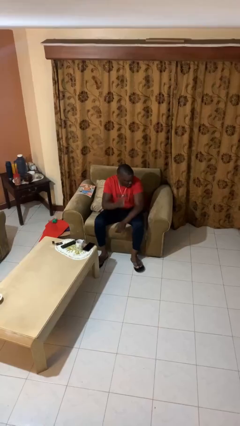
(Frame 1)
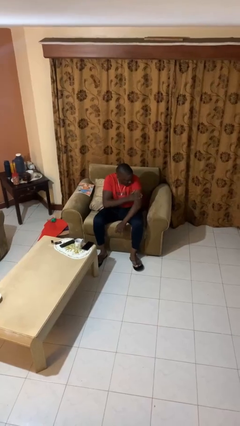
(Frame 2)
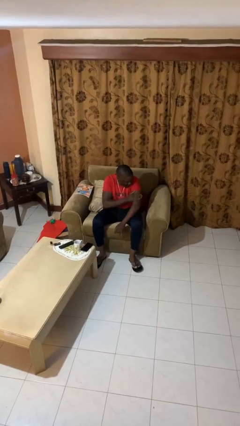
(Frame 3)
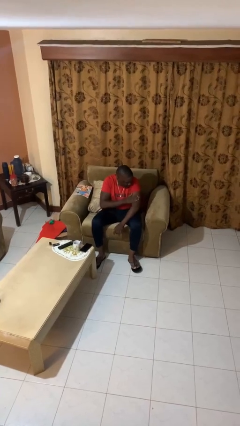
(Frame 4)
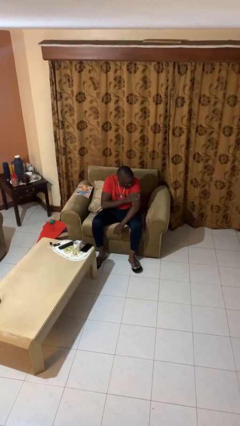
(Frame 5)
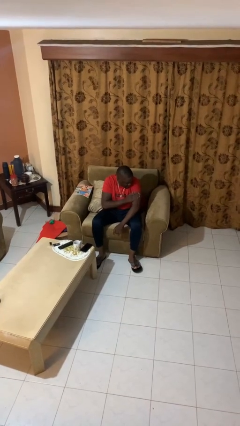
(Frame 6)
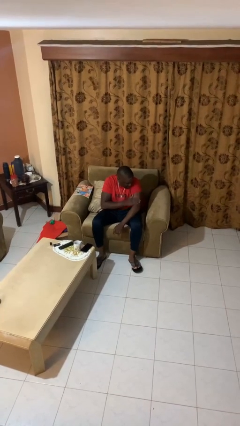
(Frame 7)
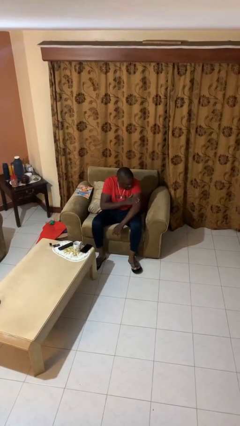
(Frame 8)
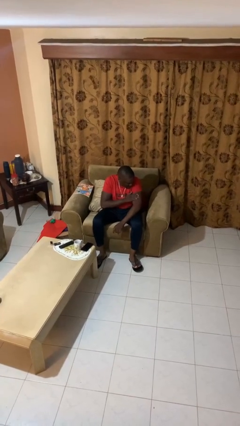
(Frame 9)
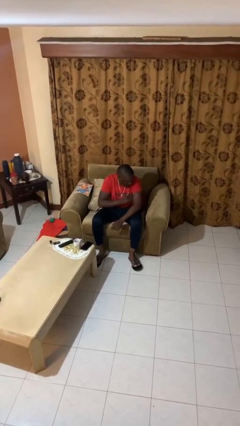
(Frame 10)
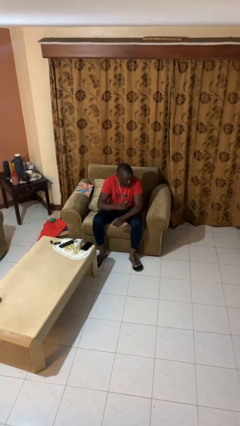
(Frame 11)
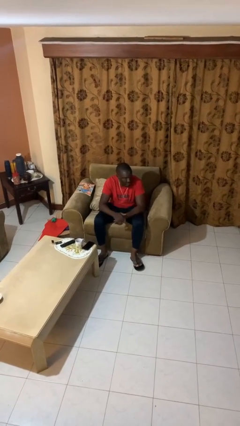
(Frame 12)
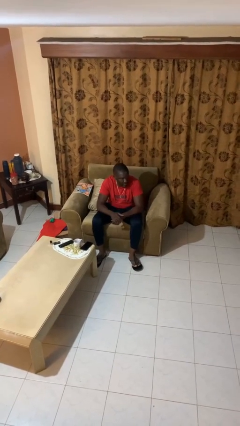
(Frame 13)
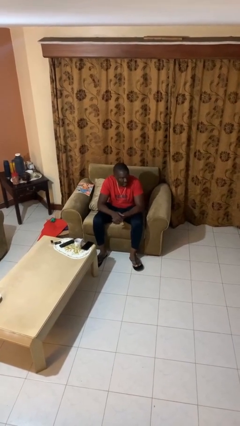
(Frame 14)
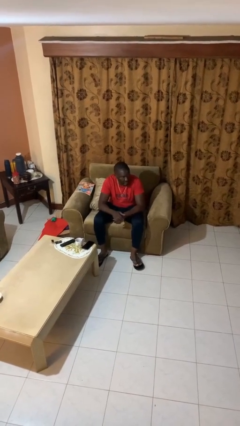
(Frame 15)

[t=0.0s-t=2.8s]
person swats bug

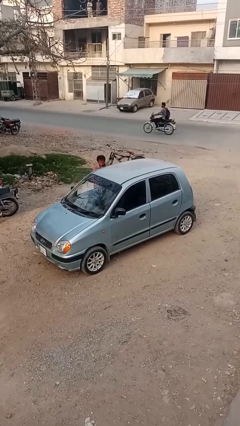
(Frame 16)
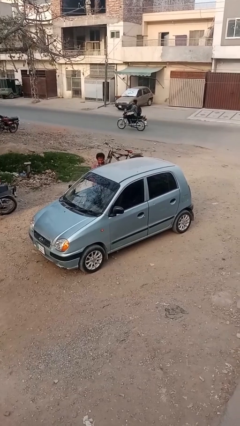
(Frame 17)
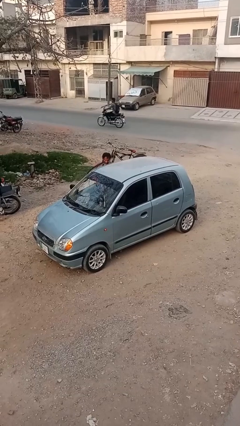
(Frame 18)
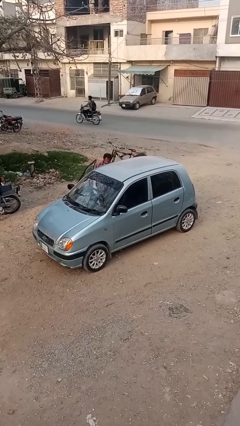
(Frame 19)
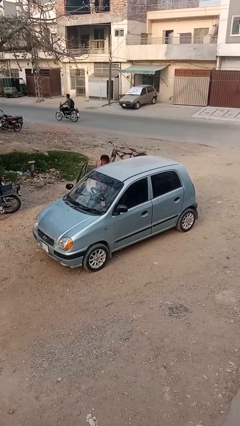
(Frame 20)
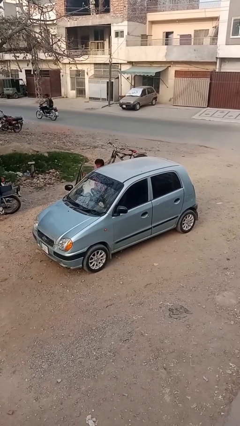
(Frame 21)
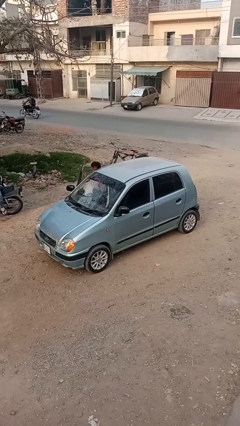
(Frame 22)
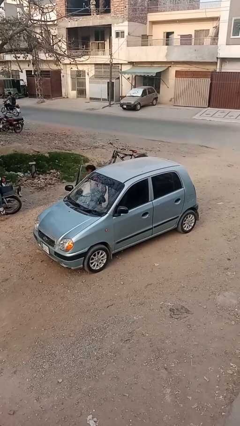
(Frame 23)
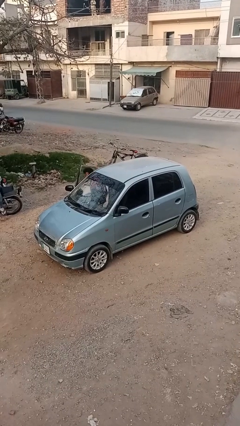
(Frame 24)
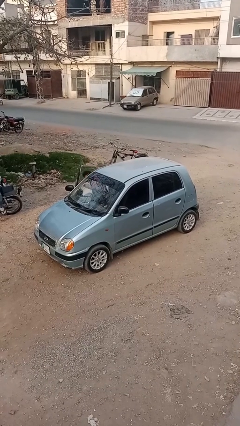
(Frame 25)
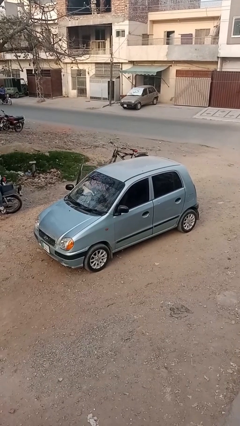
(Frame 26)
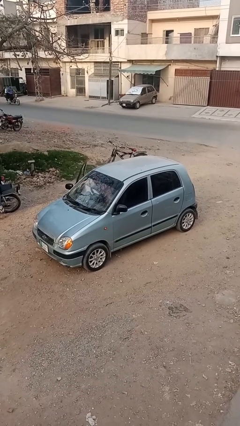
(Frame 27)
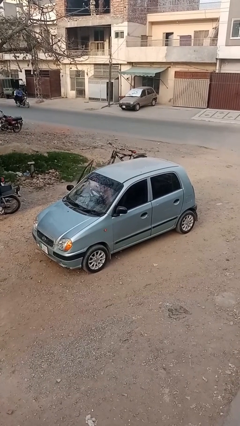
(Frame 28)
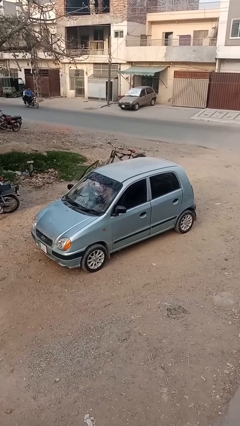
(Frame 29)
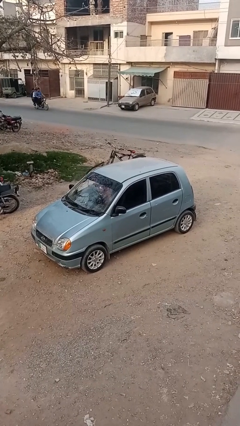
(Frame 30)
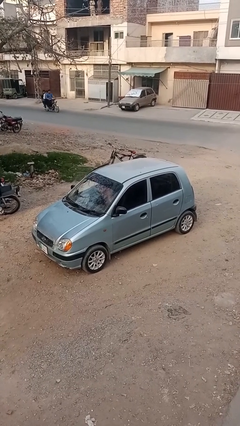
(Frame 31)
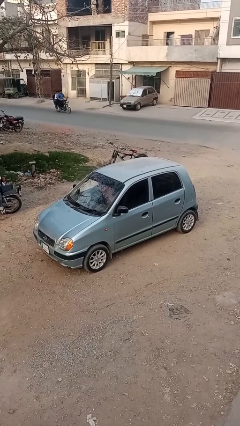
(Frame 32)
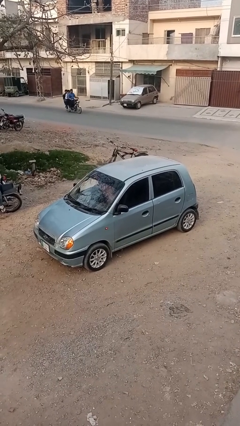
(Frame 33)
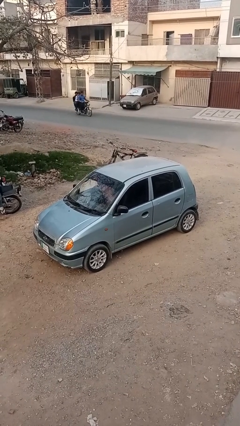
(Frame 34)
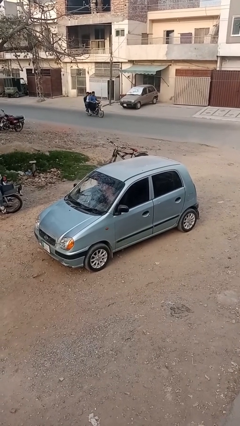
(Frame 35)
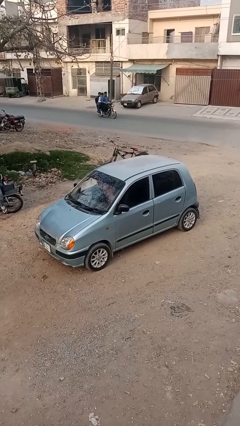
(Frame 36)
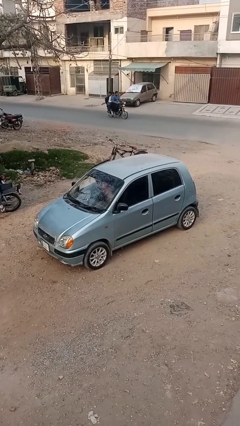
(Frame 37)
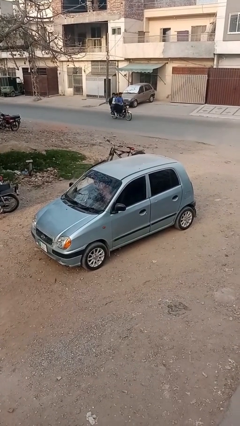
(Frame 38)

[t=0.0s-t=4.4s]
car picks up person

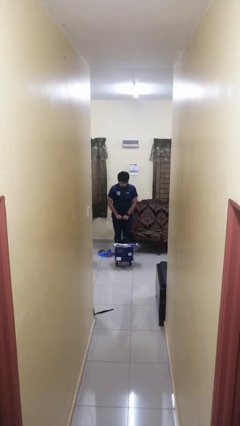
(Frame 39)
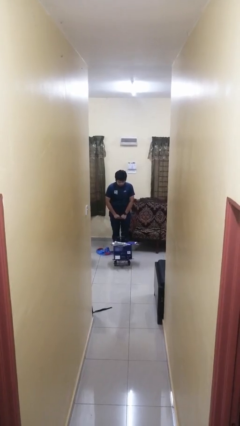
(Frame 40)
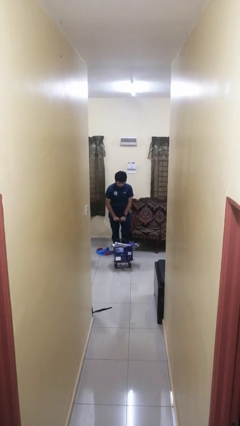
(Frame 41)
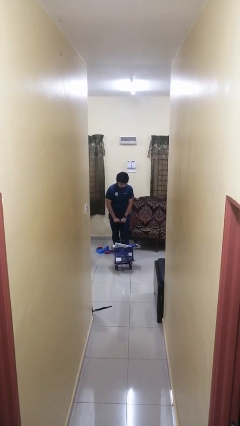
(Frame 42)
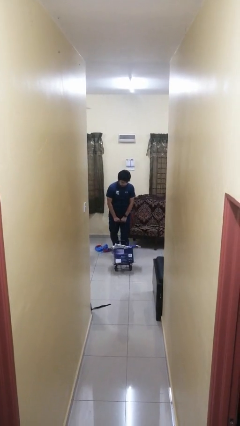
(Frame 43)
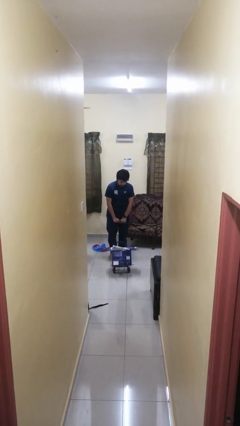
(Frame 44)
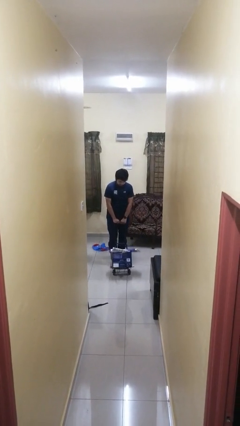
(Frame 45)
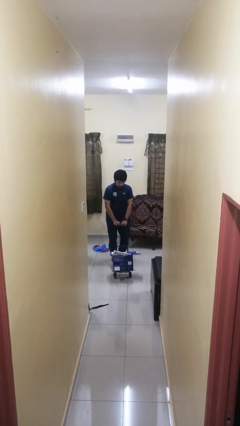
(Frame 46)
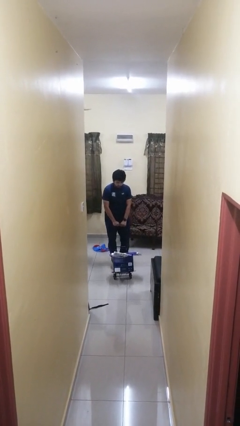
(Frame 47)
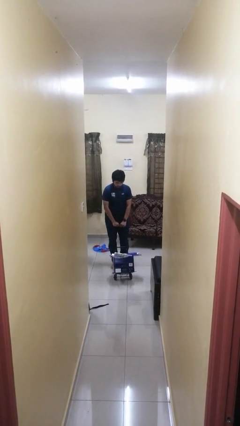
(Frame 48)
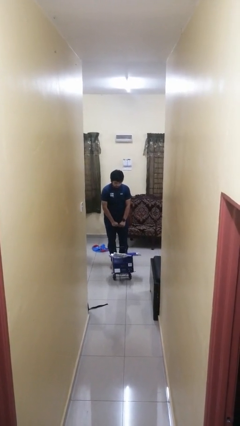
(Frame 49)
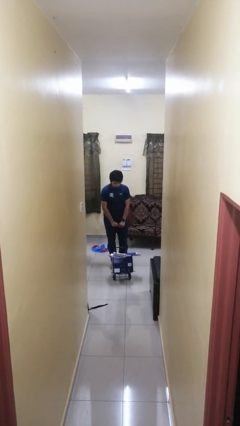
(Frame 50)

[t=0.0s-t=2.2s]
person pushes wheeled cart

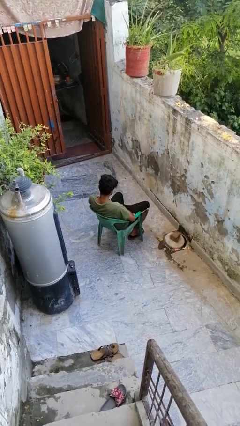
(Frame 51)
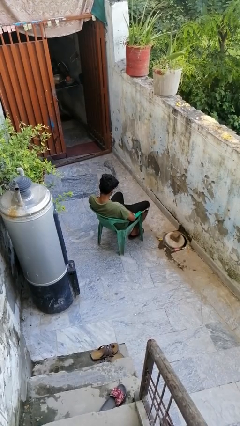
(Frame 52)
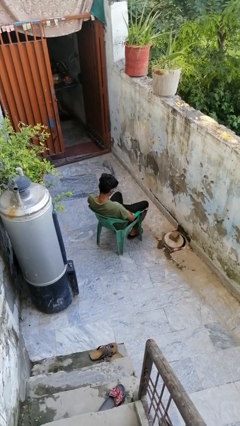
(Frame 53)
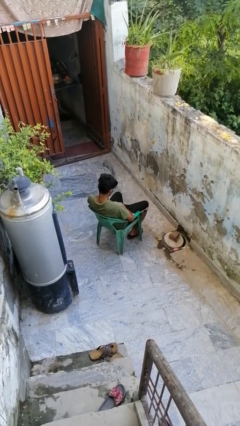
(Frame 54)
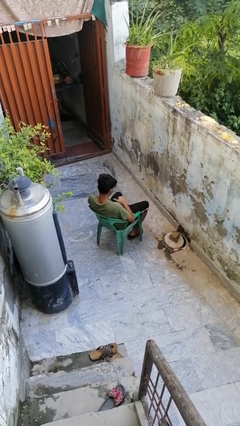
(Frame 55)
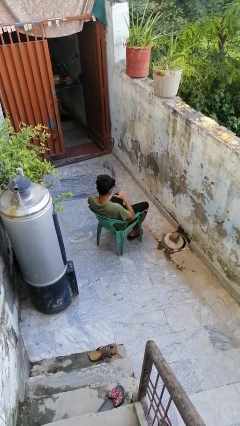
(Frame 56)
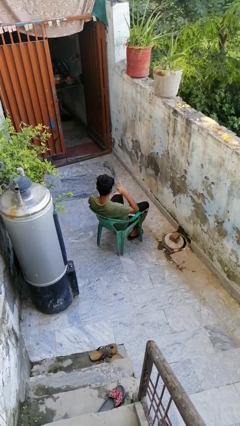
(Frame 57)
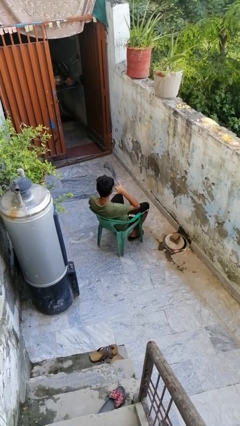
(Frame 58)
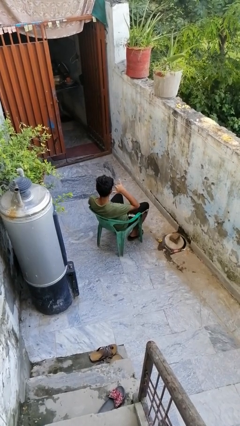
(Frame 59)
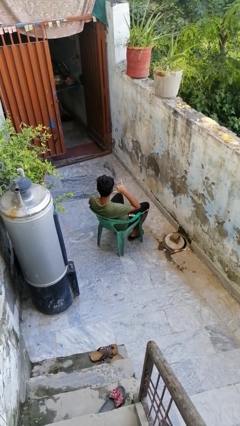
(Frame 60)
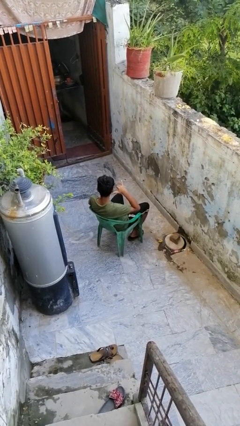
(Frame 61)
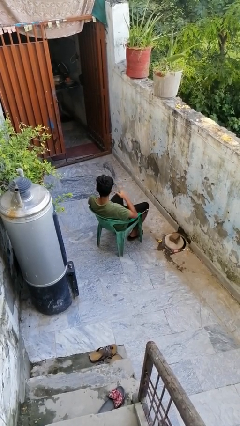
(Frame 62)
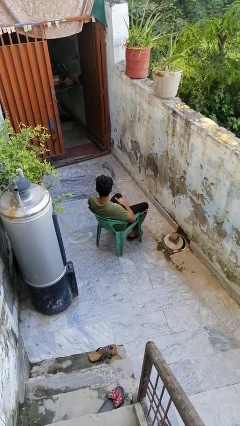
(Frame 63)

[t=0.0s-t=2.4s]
person gestures call me

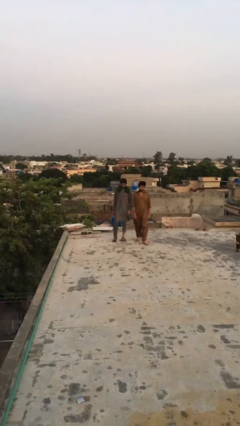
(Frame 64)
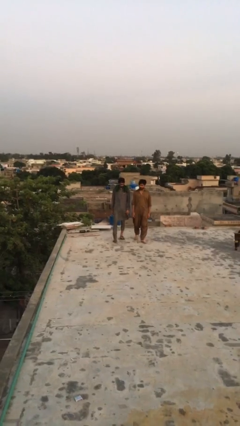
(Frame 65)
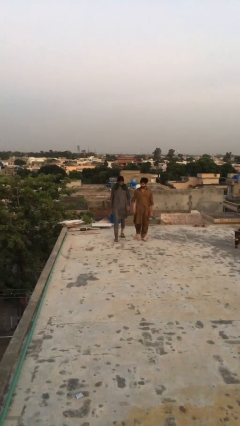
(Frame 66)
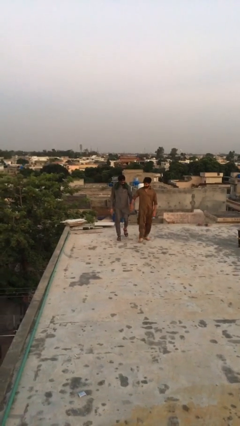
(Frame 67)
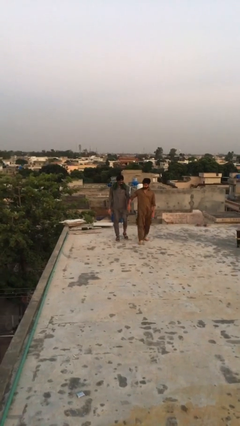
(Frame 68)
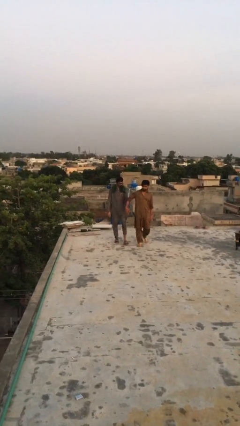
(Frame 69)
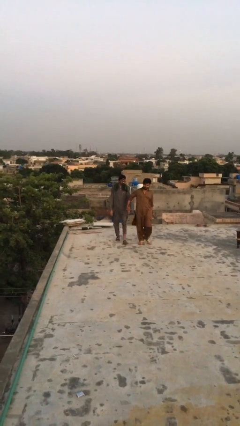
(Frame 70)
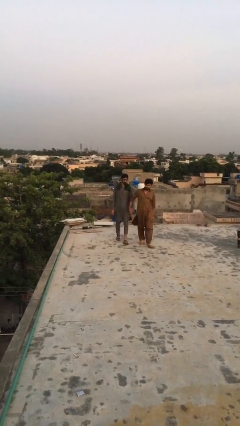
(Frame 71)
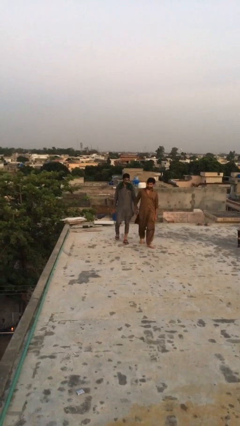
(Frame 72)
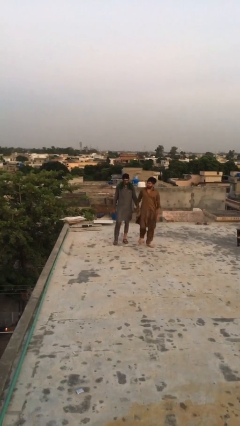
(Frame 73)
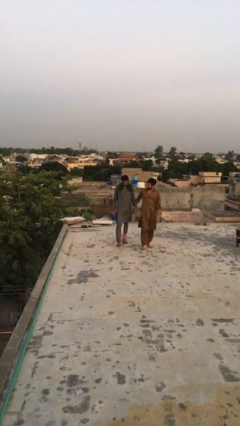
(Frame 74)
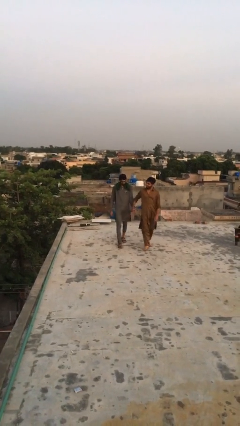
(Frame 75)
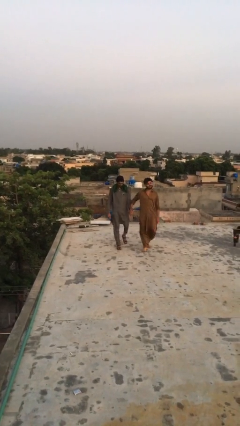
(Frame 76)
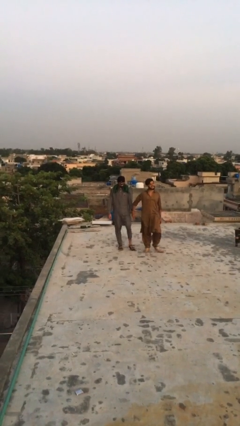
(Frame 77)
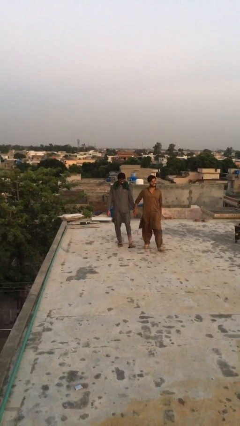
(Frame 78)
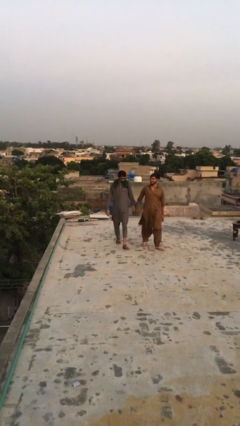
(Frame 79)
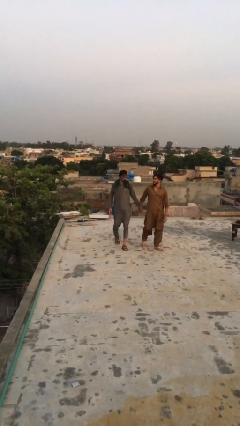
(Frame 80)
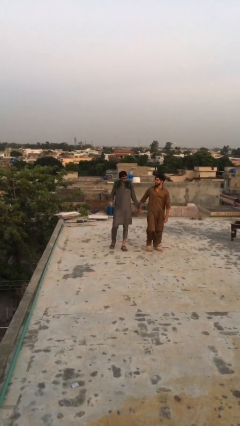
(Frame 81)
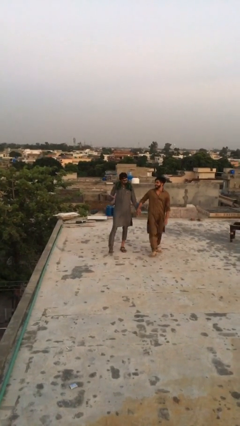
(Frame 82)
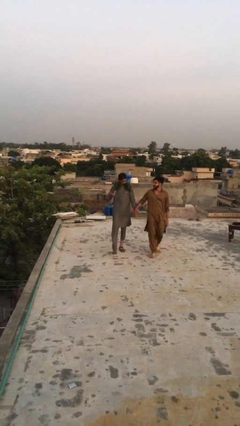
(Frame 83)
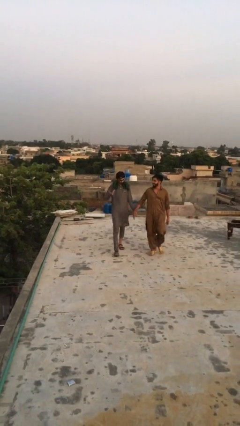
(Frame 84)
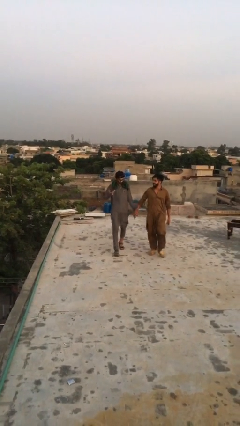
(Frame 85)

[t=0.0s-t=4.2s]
person holds hand

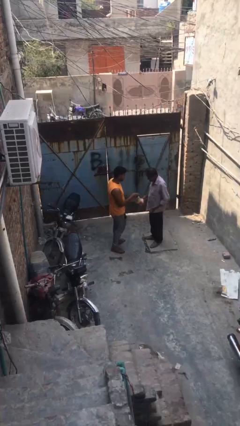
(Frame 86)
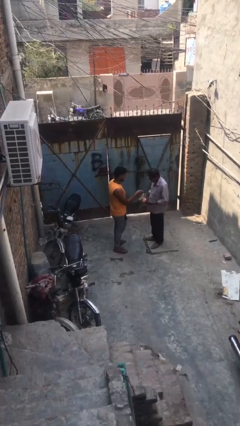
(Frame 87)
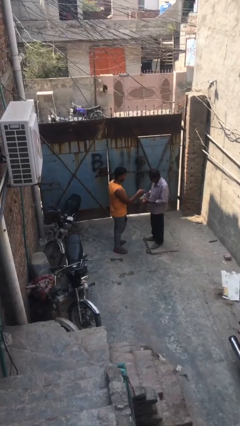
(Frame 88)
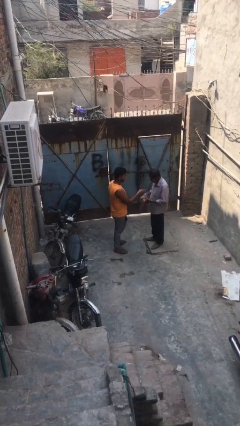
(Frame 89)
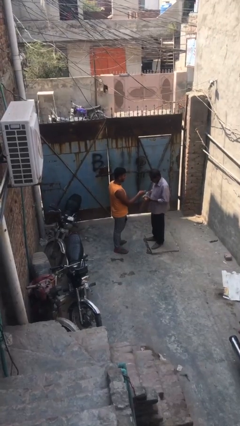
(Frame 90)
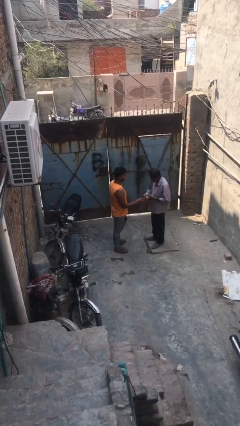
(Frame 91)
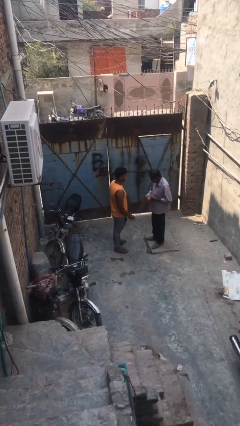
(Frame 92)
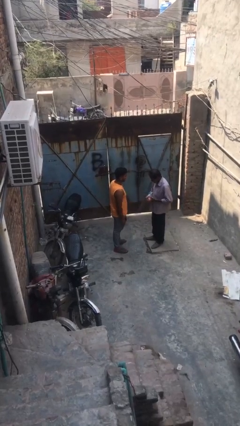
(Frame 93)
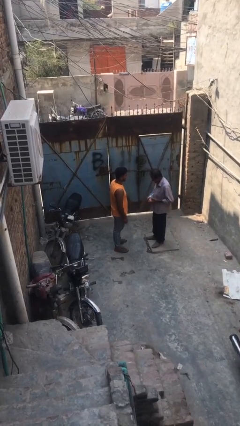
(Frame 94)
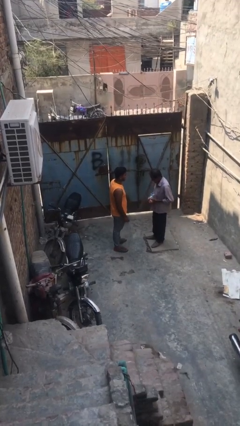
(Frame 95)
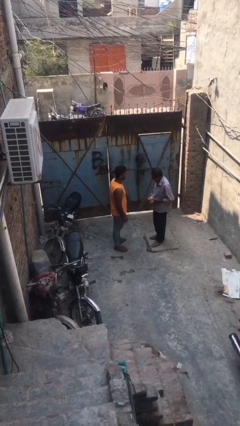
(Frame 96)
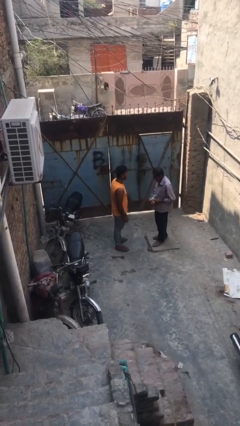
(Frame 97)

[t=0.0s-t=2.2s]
person transfers object to person
